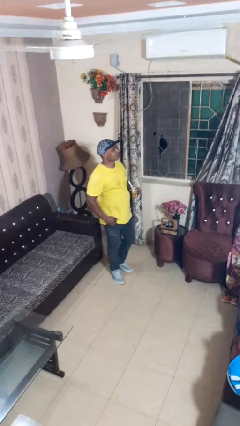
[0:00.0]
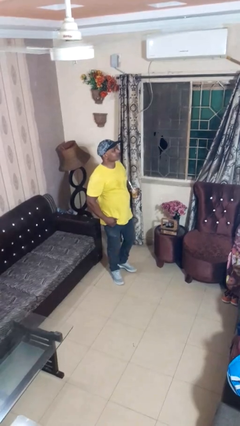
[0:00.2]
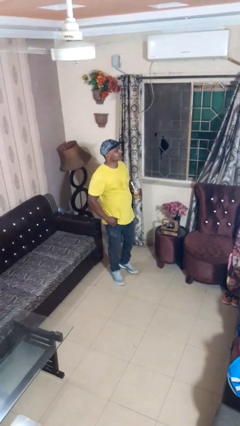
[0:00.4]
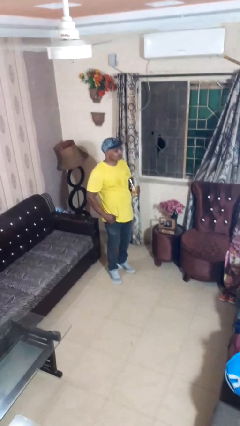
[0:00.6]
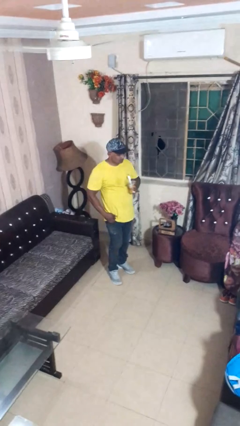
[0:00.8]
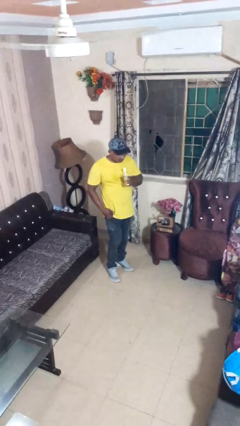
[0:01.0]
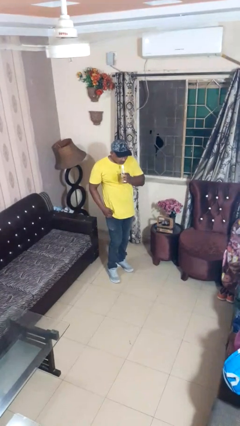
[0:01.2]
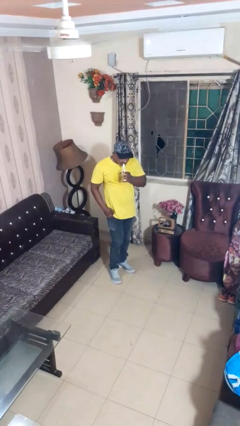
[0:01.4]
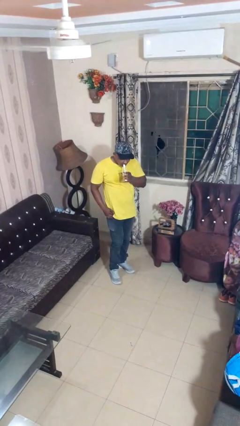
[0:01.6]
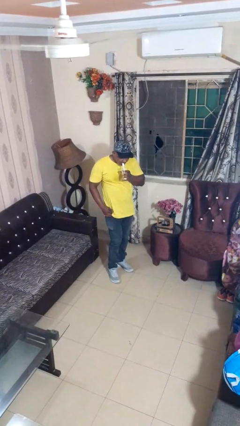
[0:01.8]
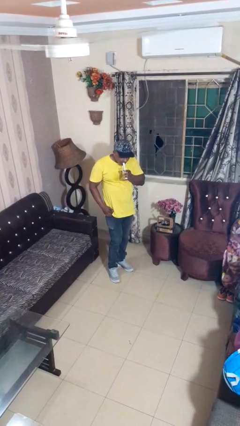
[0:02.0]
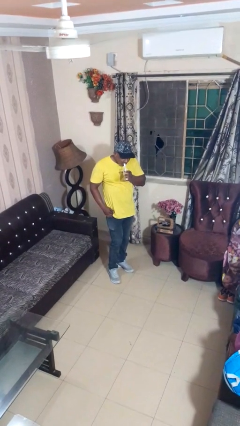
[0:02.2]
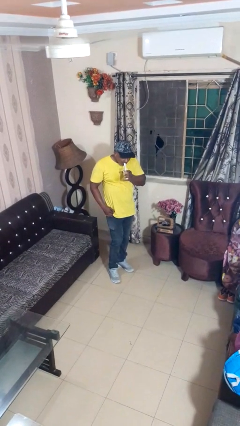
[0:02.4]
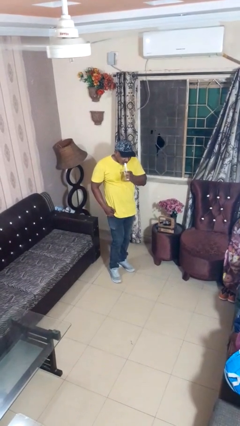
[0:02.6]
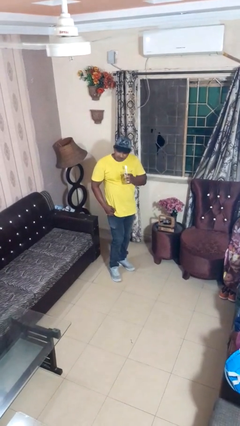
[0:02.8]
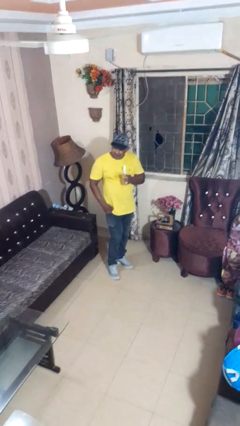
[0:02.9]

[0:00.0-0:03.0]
person drinks from straw

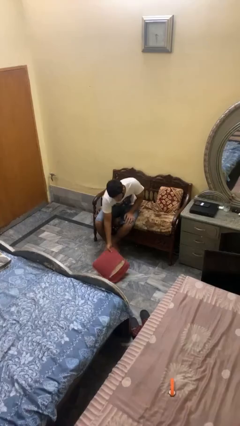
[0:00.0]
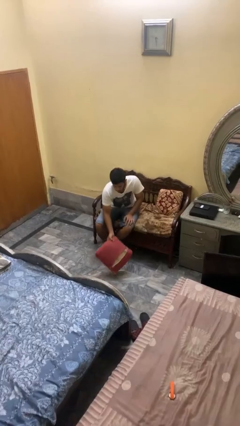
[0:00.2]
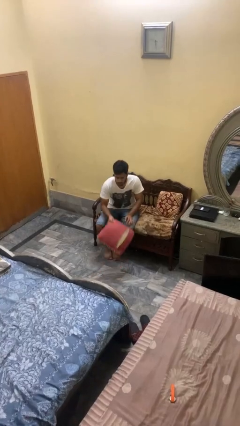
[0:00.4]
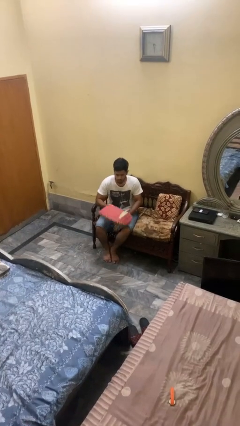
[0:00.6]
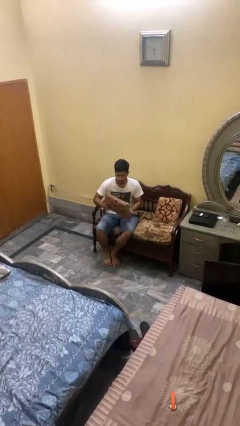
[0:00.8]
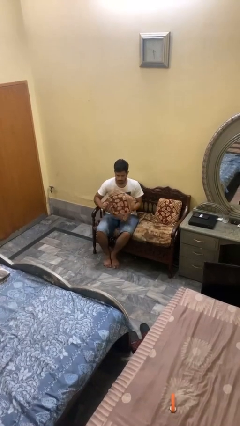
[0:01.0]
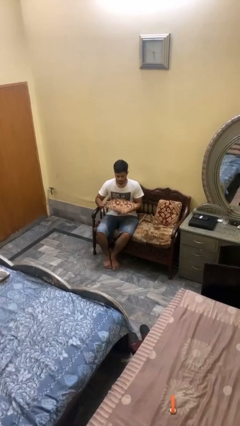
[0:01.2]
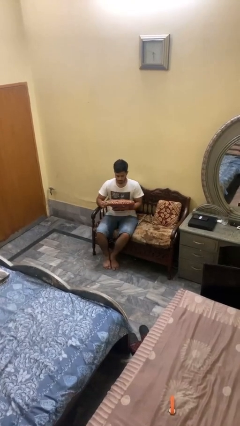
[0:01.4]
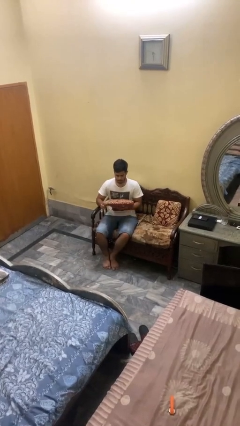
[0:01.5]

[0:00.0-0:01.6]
person picks up object from floor

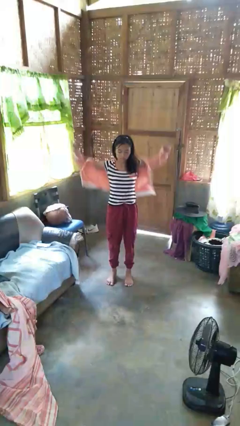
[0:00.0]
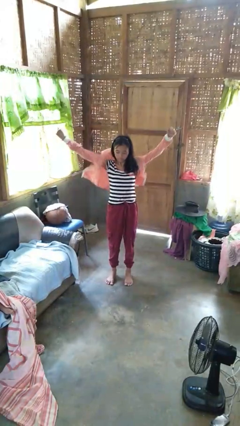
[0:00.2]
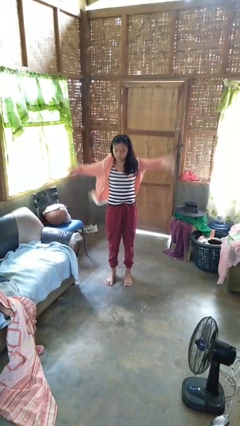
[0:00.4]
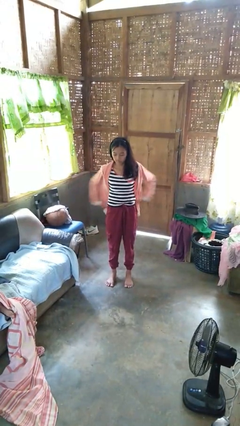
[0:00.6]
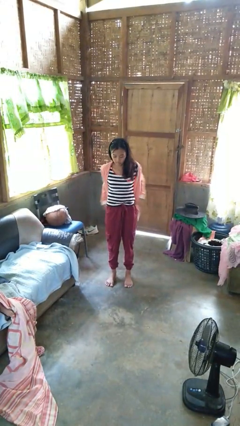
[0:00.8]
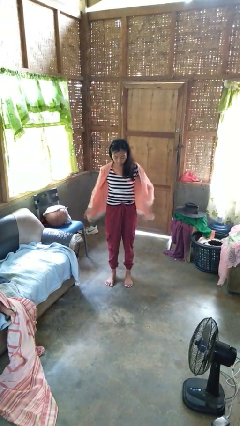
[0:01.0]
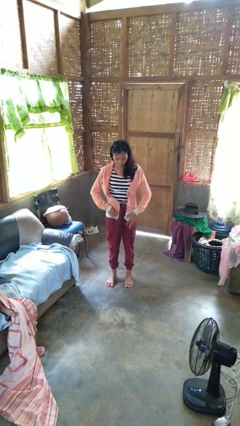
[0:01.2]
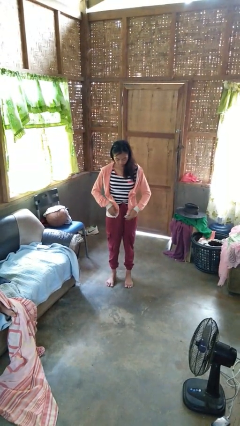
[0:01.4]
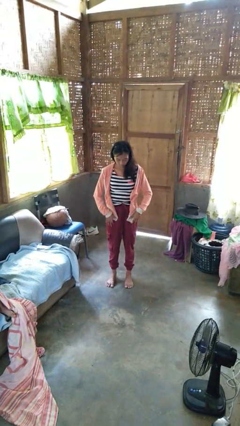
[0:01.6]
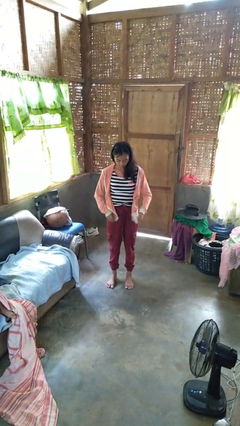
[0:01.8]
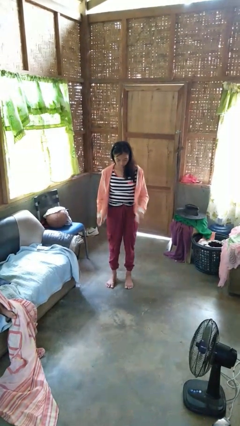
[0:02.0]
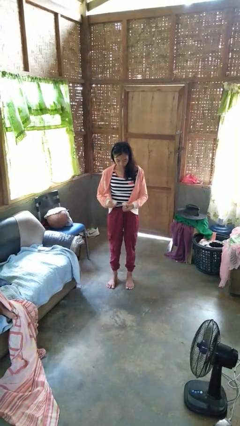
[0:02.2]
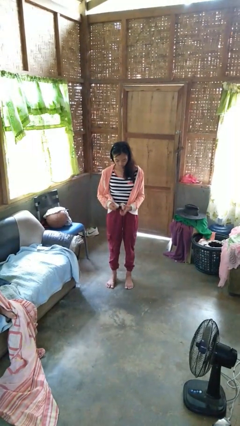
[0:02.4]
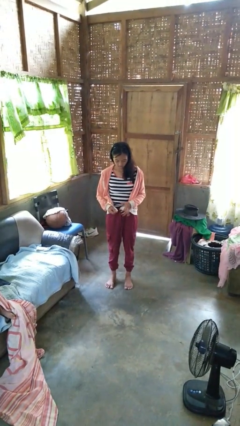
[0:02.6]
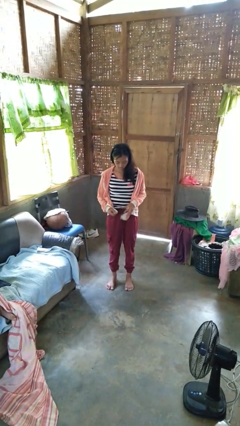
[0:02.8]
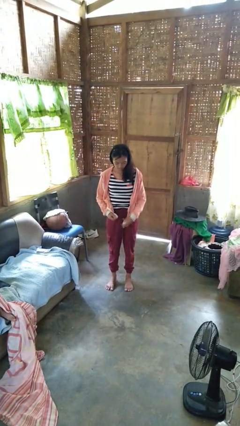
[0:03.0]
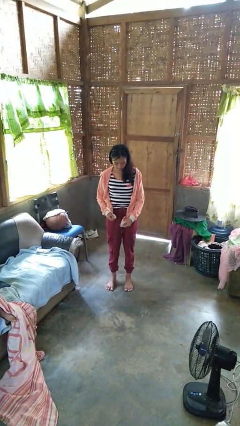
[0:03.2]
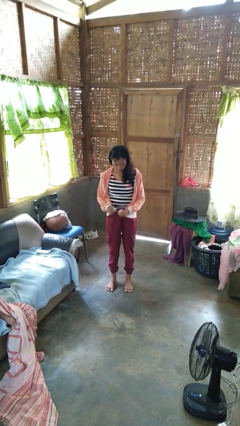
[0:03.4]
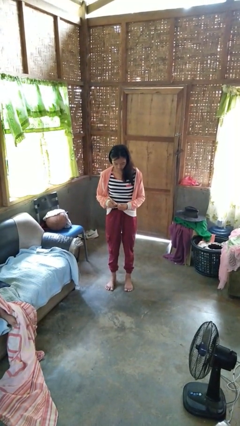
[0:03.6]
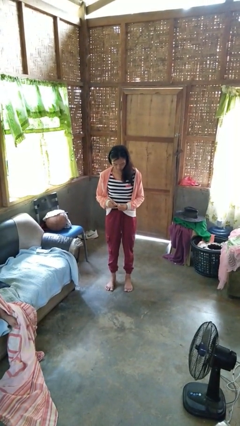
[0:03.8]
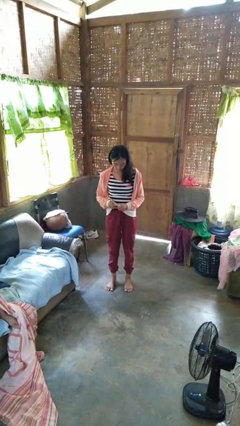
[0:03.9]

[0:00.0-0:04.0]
person puts on jacket

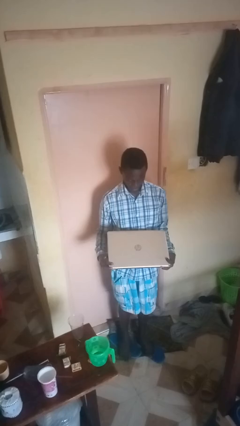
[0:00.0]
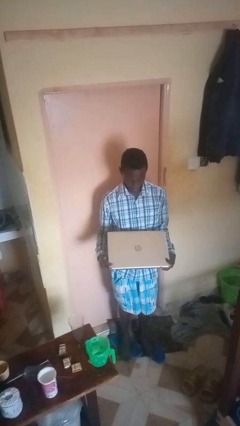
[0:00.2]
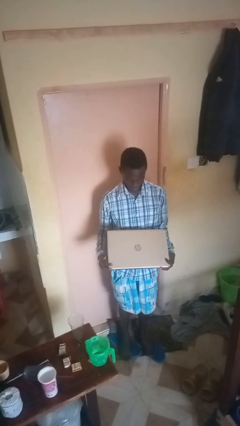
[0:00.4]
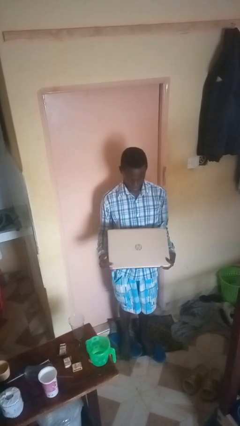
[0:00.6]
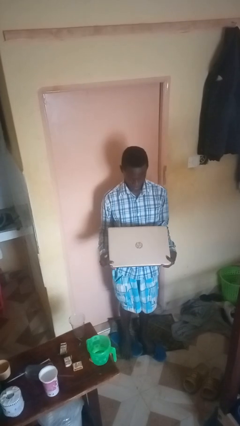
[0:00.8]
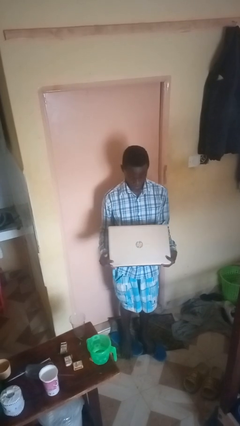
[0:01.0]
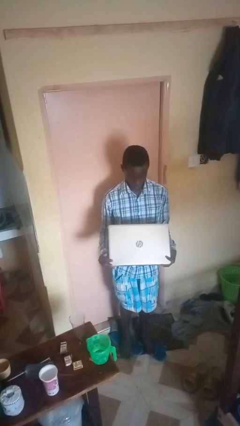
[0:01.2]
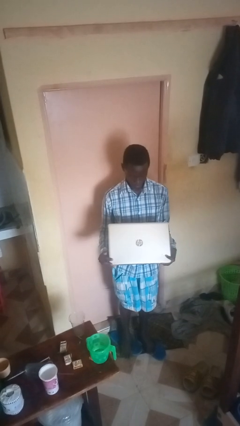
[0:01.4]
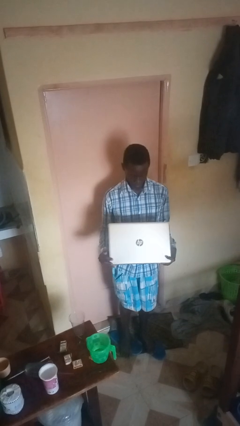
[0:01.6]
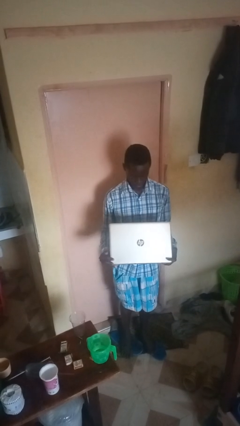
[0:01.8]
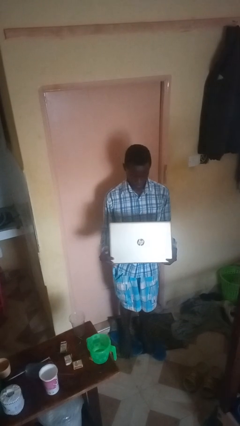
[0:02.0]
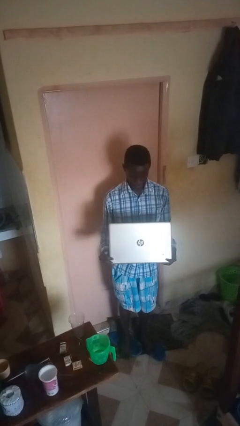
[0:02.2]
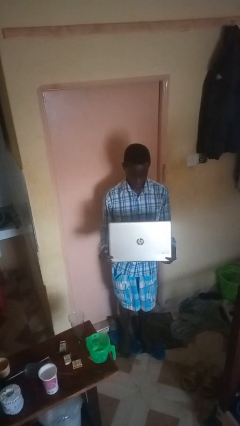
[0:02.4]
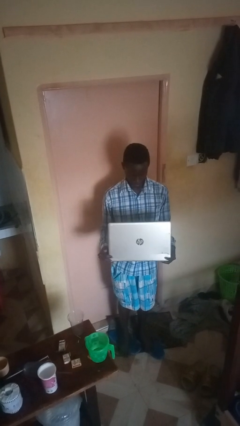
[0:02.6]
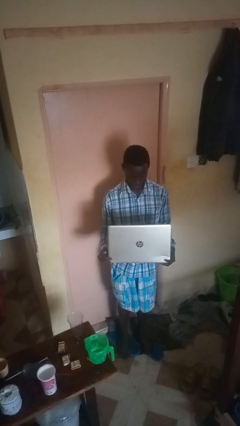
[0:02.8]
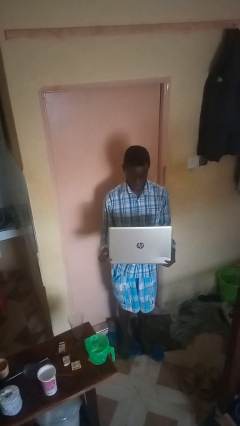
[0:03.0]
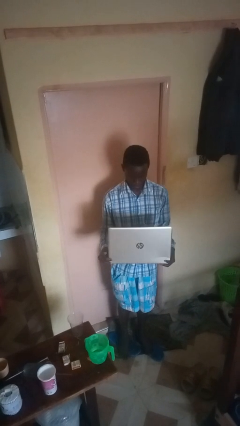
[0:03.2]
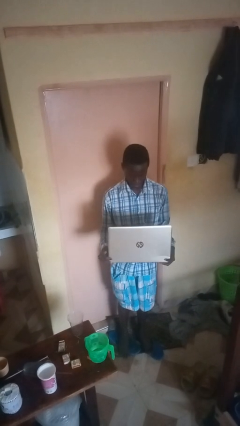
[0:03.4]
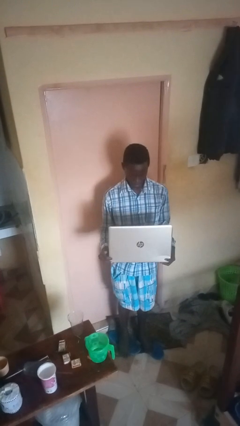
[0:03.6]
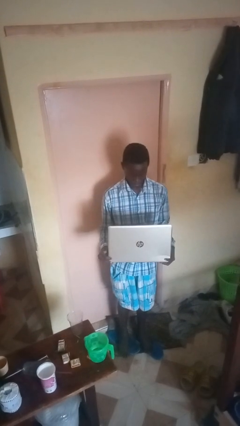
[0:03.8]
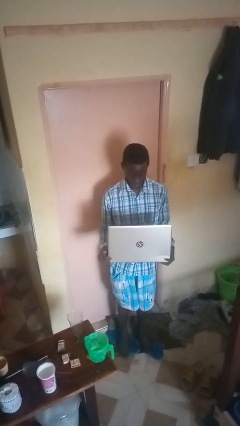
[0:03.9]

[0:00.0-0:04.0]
person opens laptop

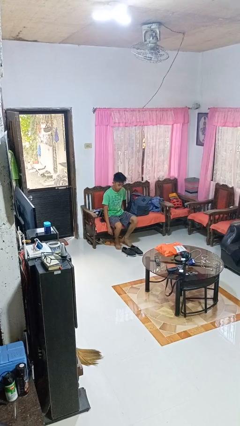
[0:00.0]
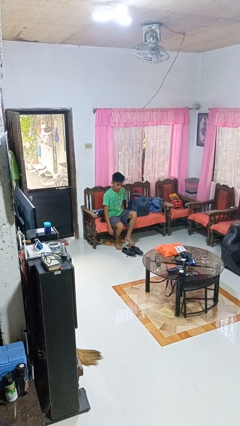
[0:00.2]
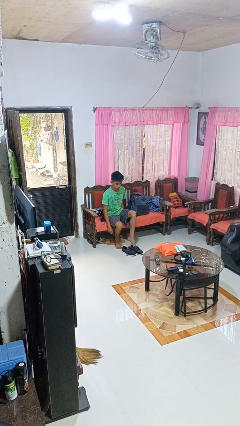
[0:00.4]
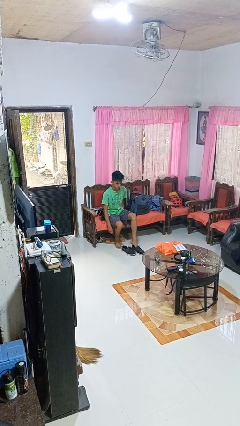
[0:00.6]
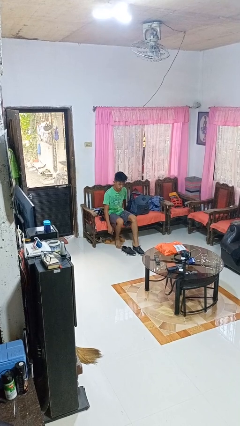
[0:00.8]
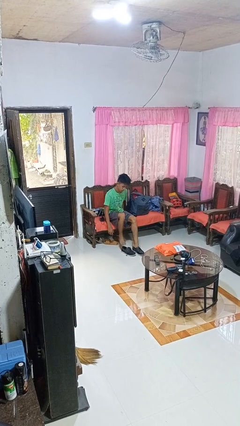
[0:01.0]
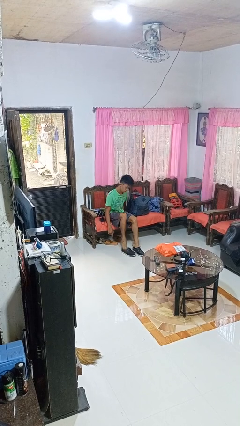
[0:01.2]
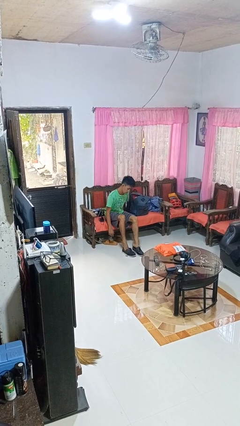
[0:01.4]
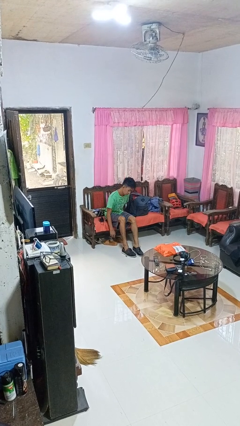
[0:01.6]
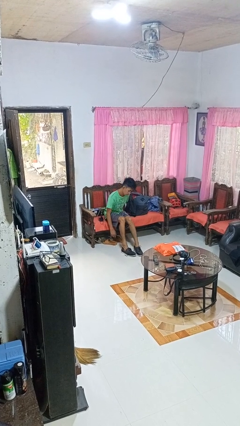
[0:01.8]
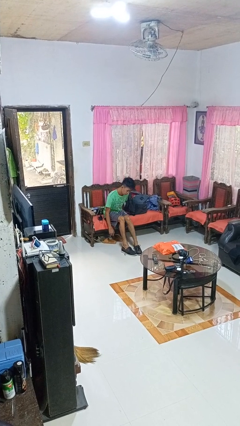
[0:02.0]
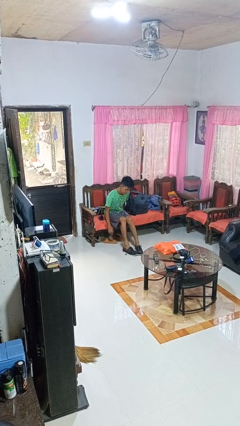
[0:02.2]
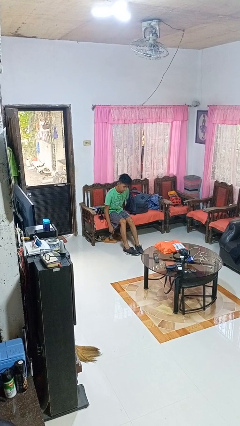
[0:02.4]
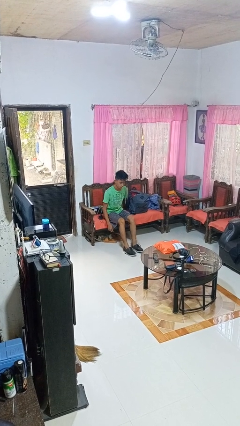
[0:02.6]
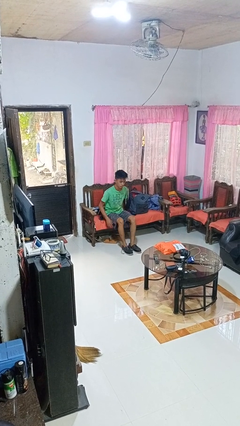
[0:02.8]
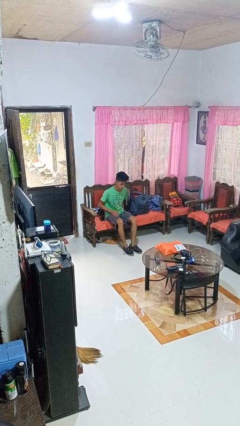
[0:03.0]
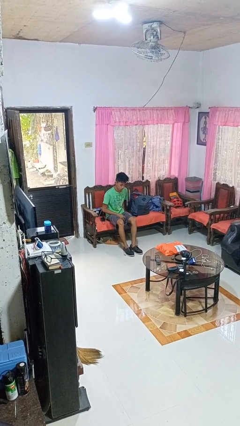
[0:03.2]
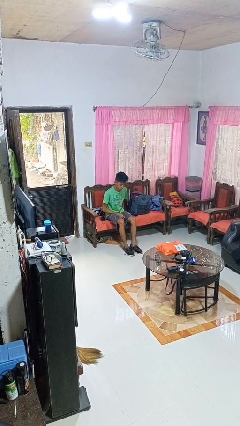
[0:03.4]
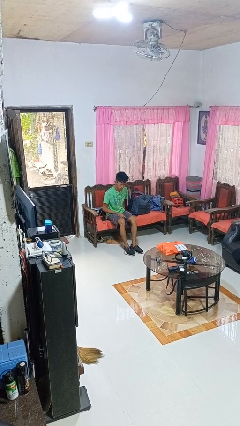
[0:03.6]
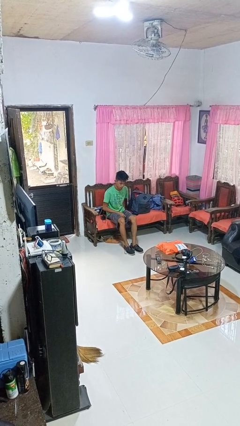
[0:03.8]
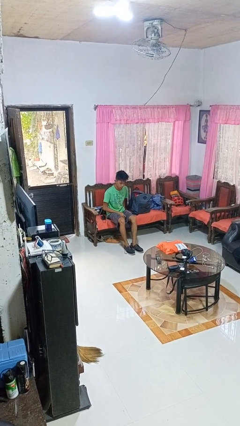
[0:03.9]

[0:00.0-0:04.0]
person puts on shoes

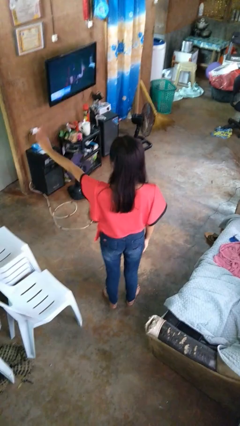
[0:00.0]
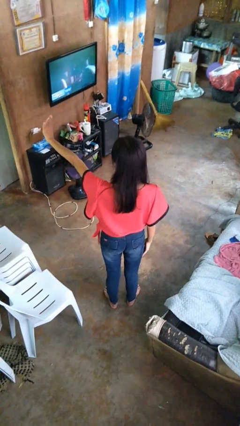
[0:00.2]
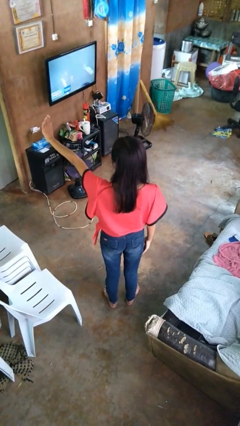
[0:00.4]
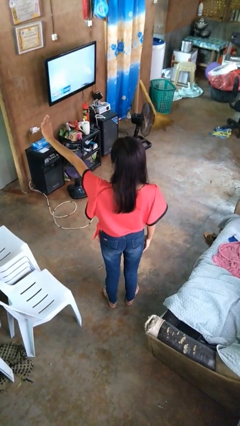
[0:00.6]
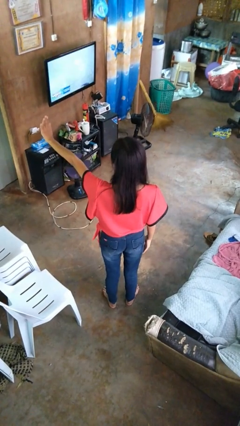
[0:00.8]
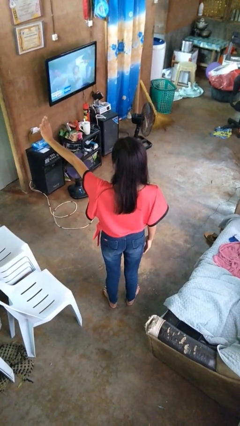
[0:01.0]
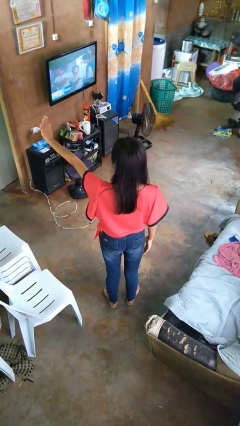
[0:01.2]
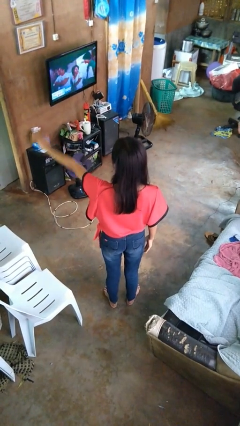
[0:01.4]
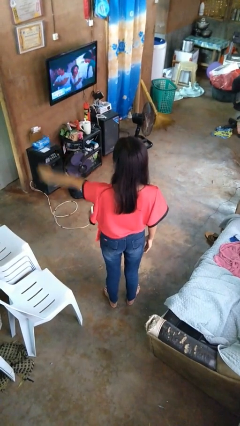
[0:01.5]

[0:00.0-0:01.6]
person gestures stop
